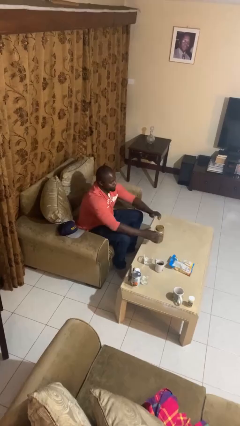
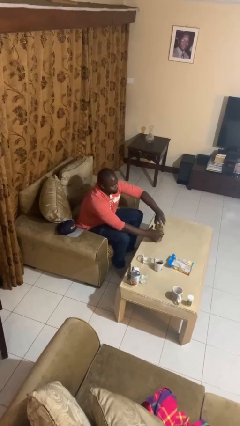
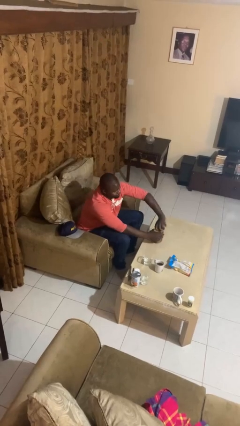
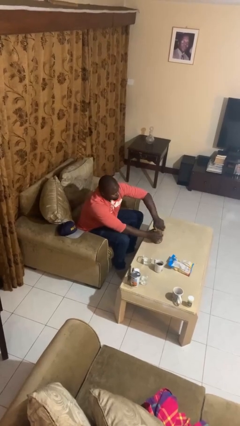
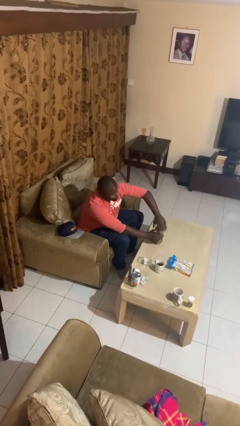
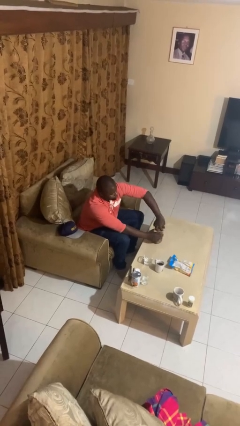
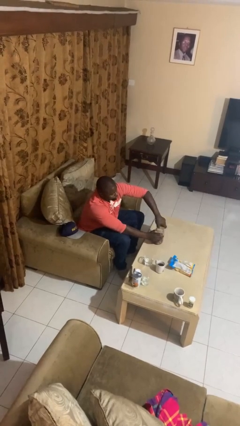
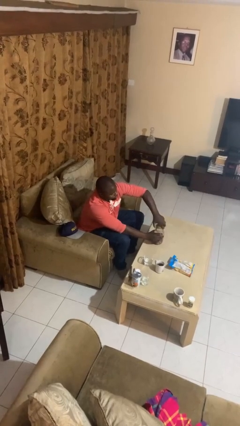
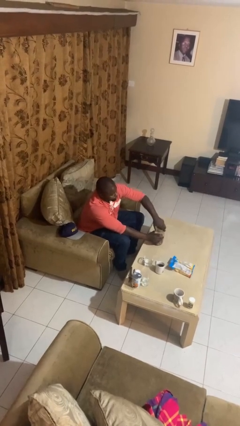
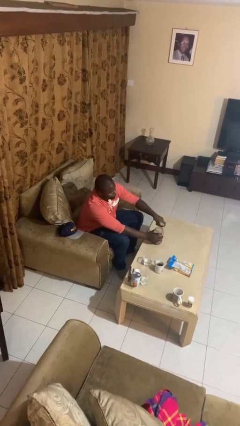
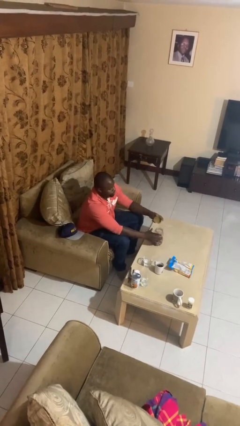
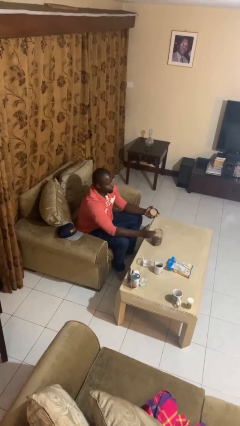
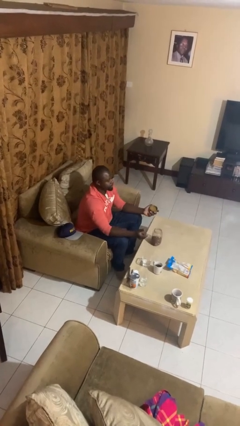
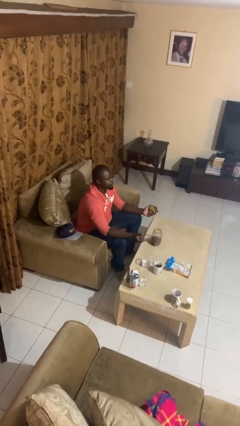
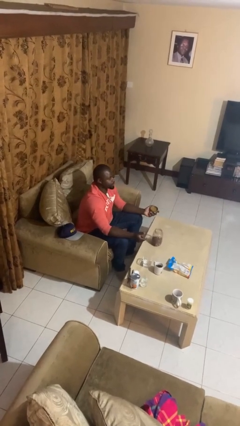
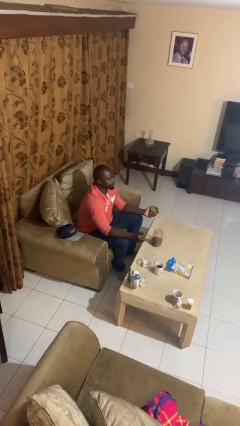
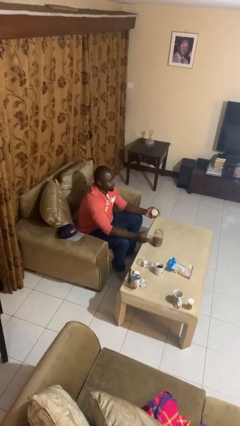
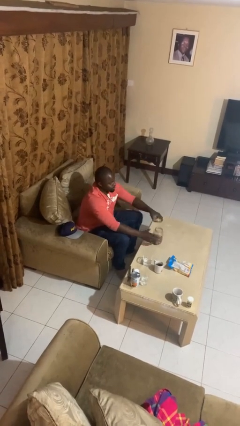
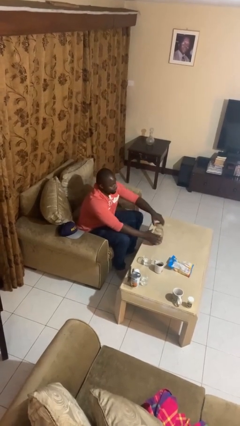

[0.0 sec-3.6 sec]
person opens jar

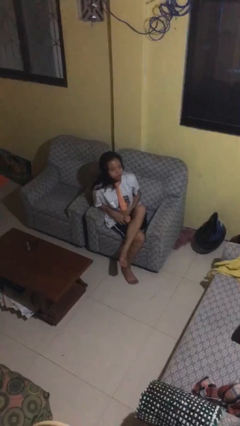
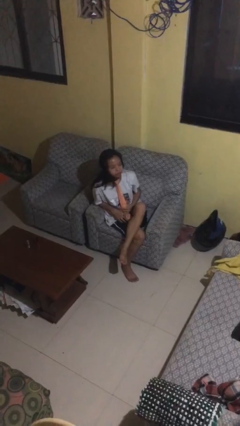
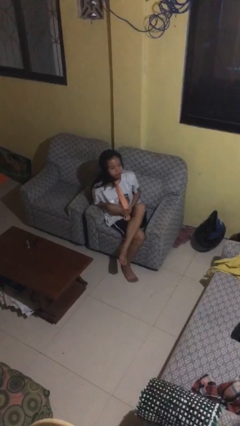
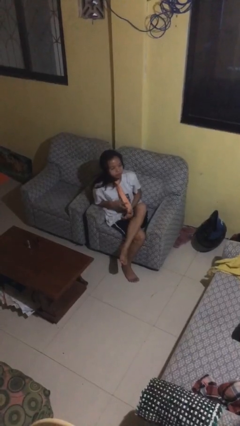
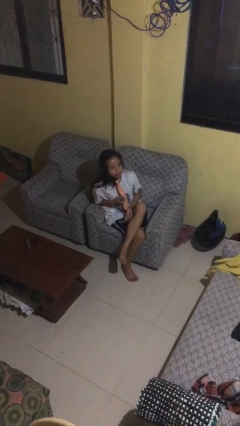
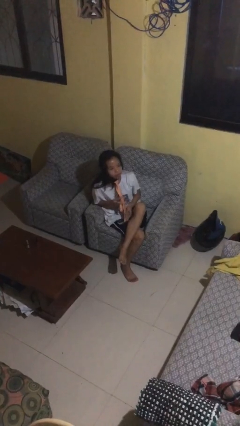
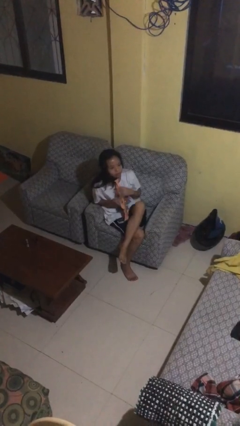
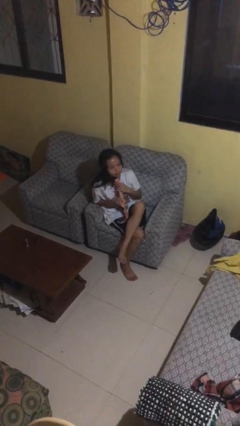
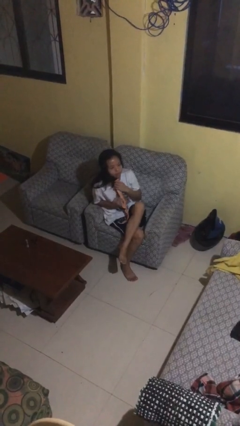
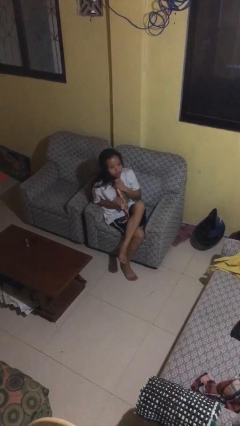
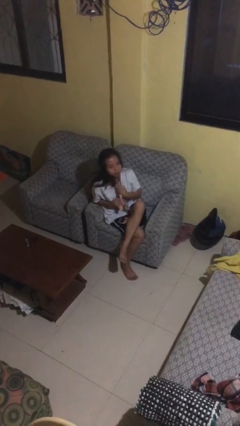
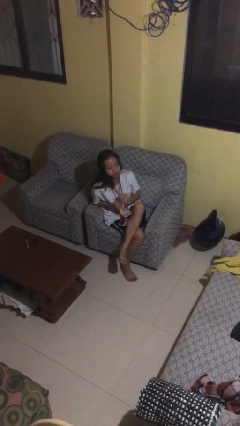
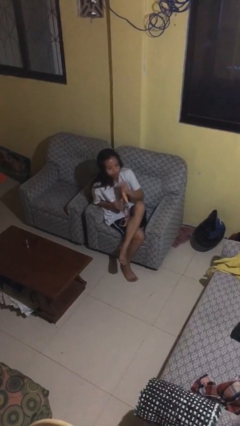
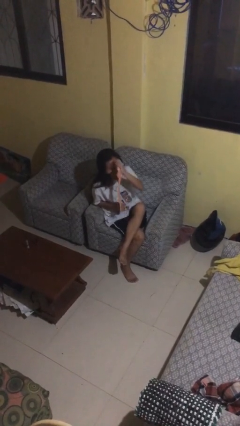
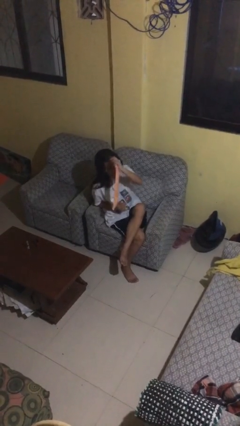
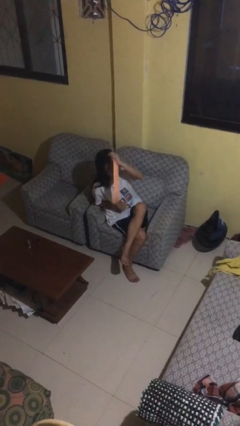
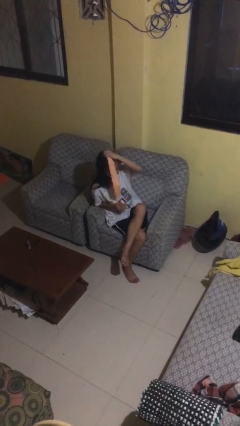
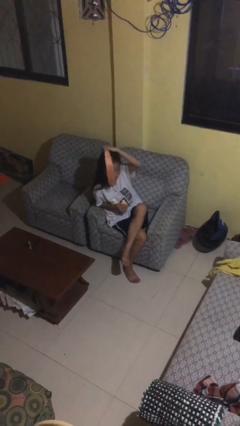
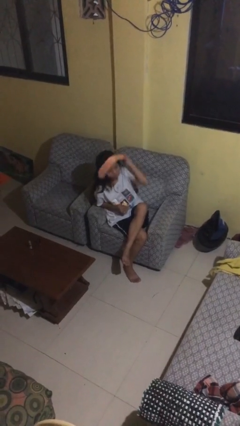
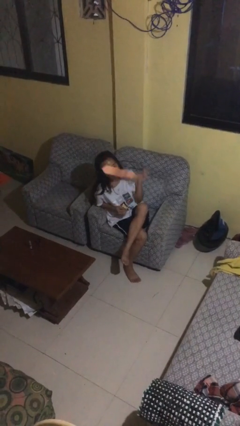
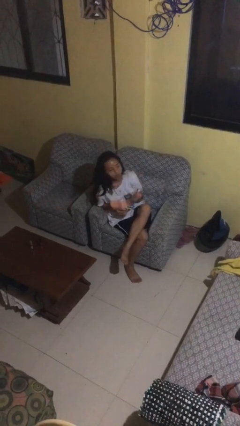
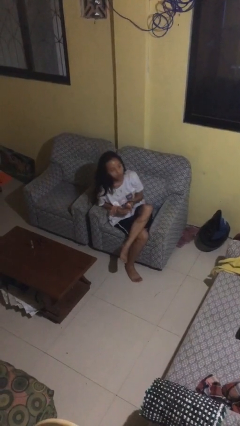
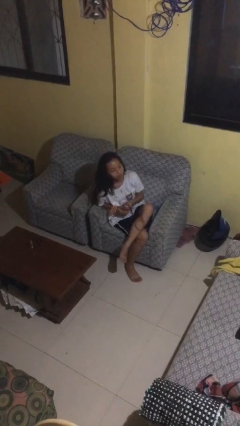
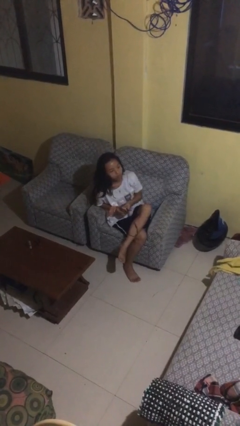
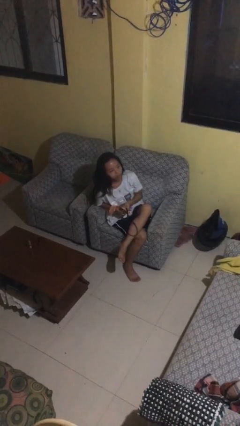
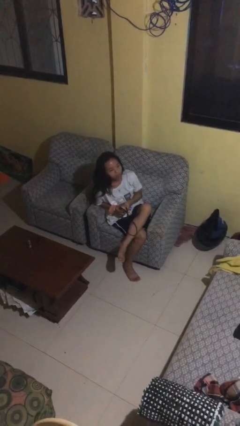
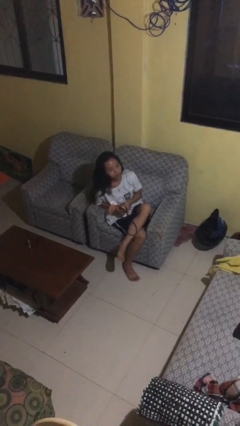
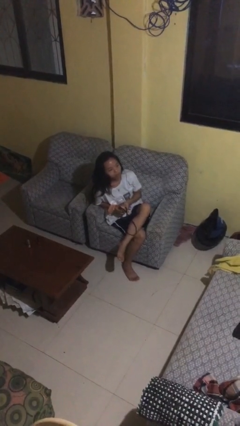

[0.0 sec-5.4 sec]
person takes off necktie

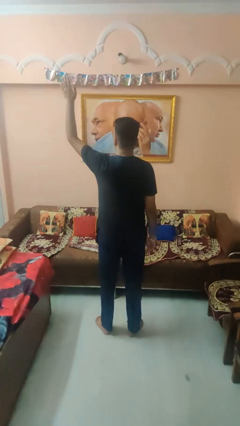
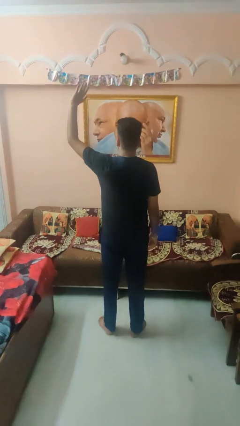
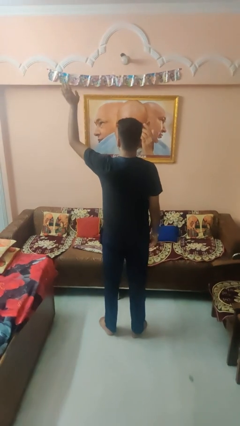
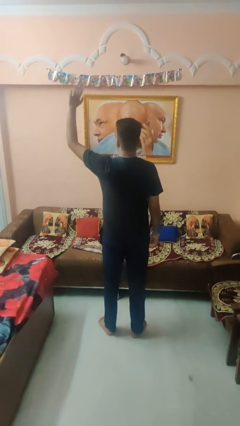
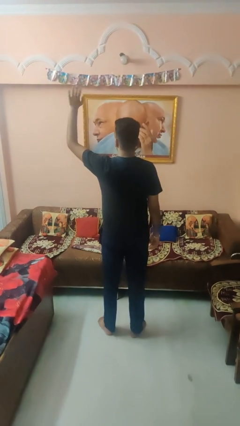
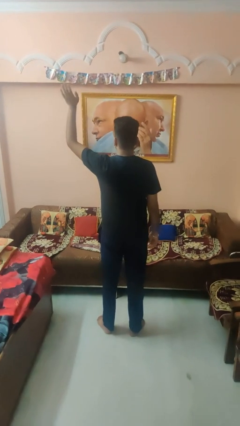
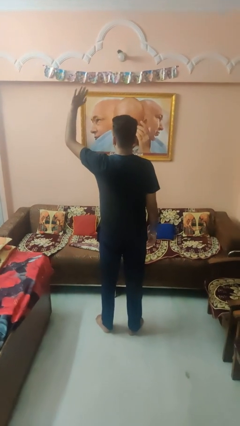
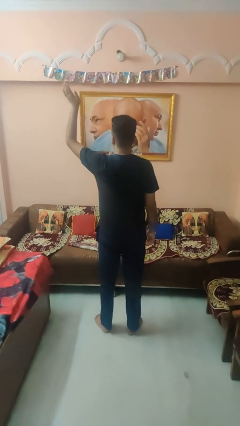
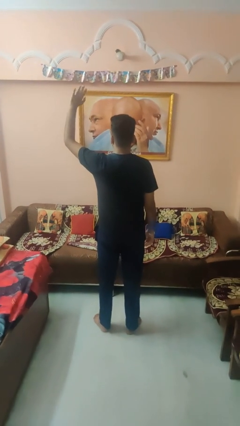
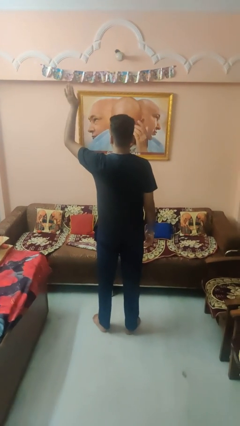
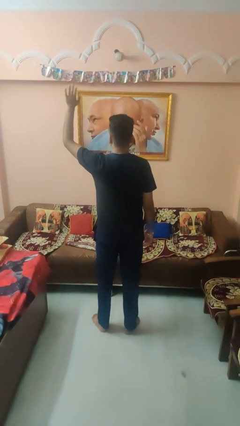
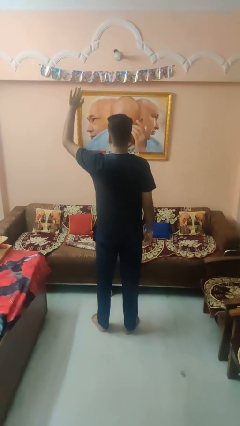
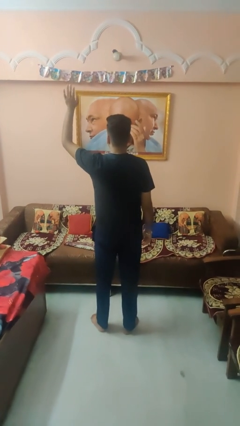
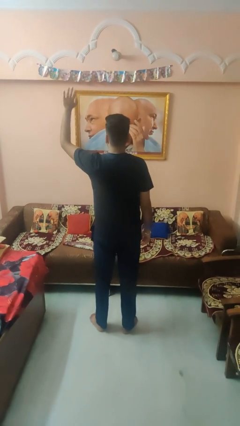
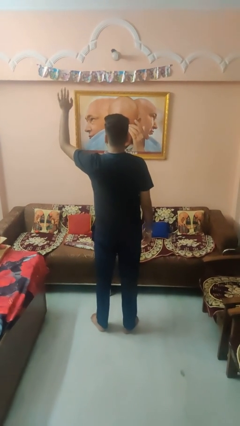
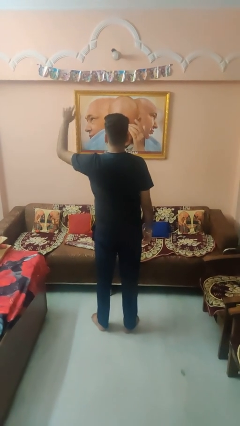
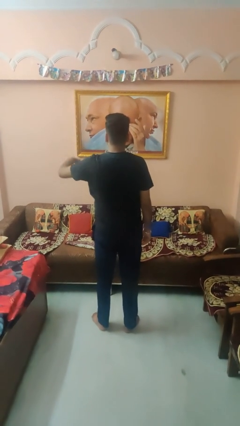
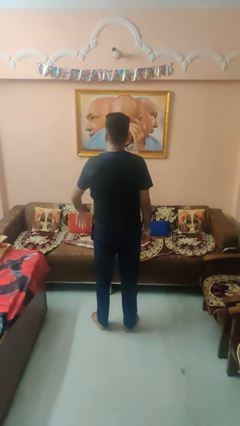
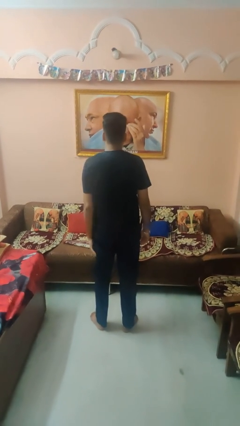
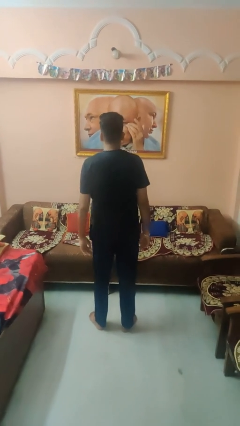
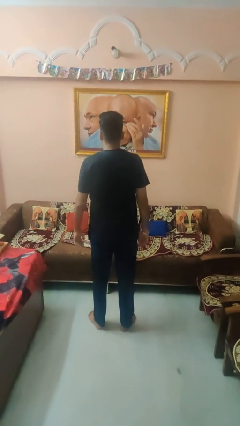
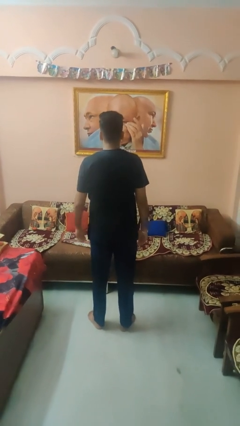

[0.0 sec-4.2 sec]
person waves at person

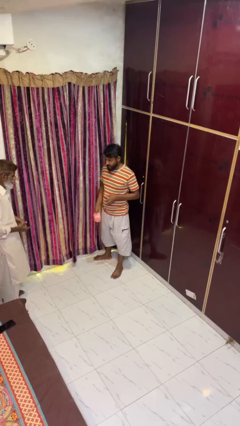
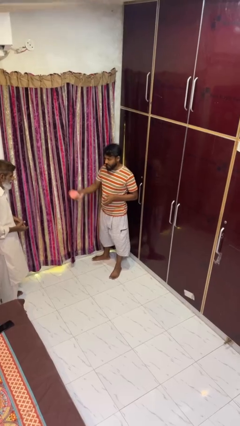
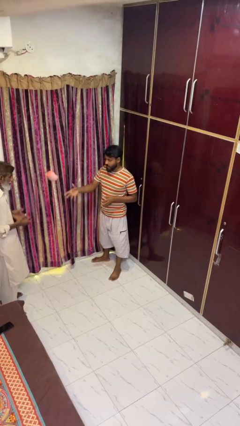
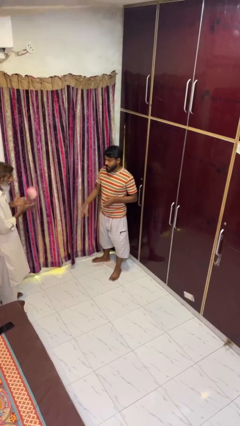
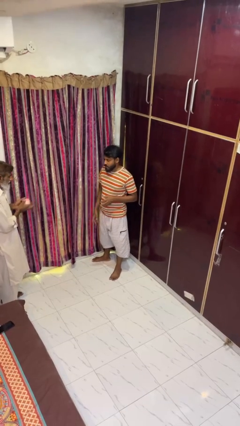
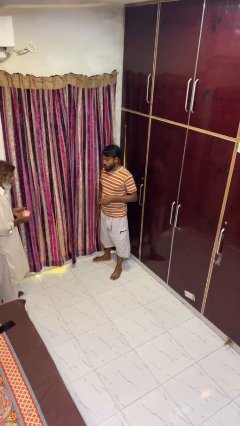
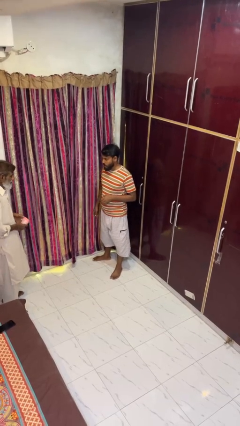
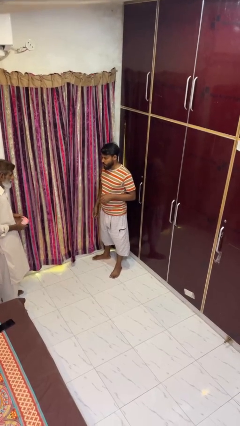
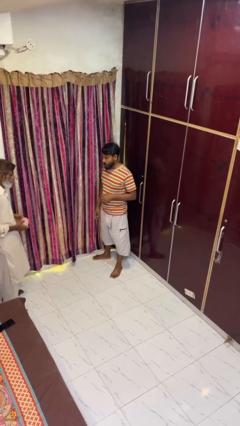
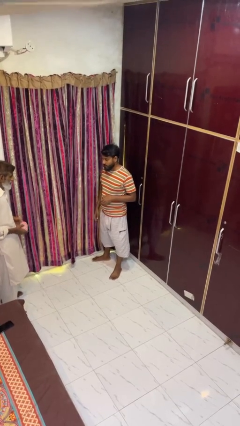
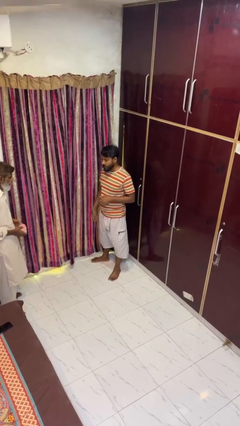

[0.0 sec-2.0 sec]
person throws object to person

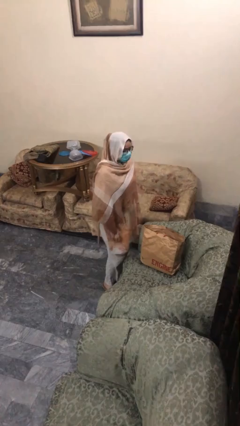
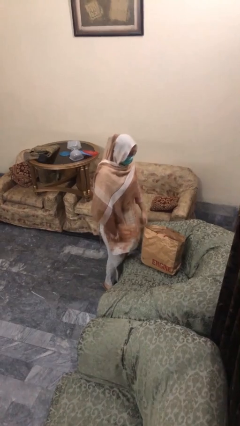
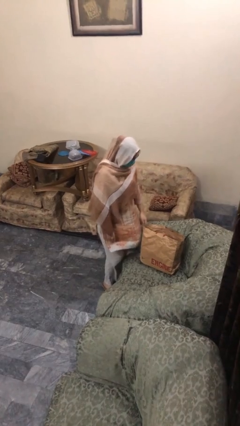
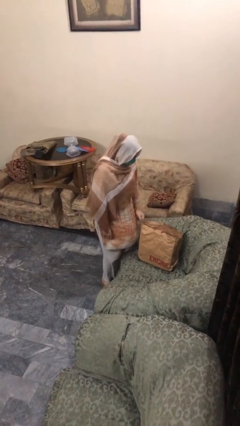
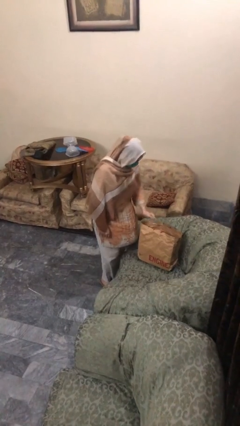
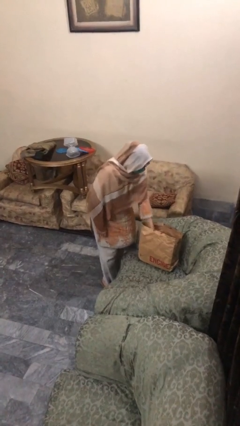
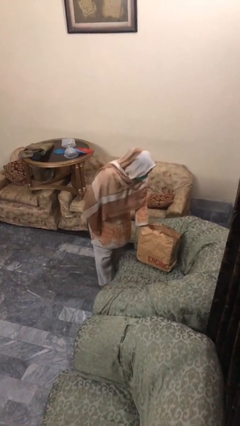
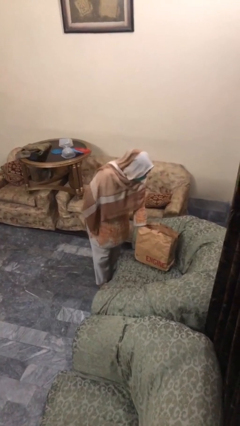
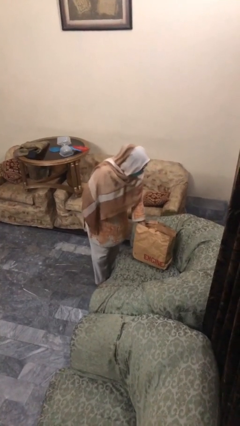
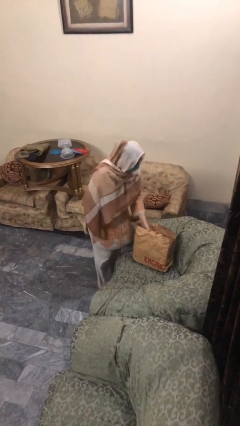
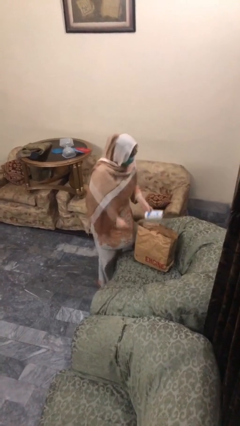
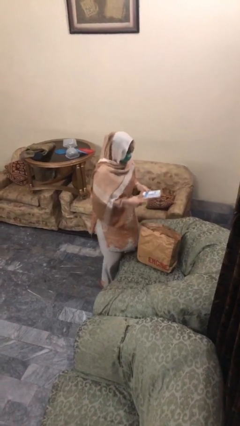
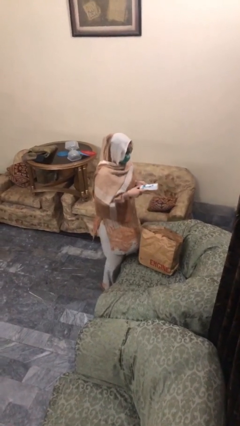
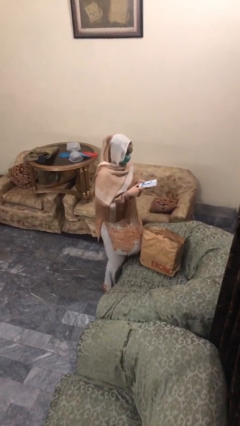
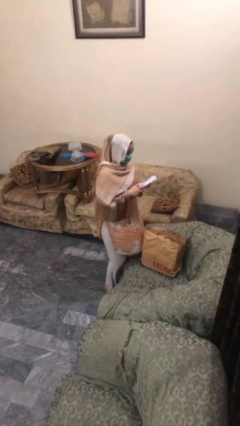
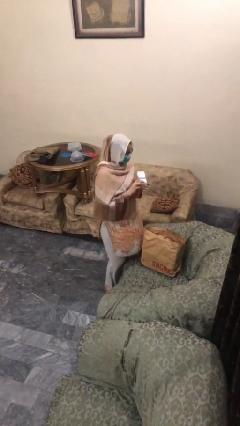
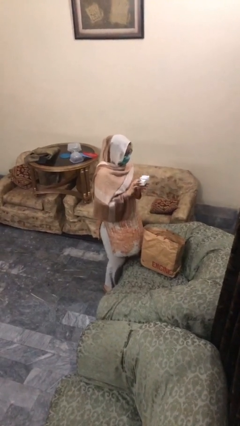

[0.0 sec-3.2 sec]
person takes object from bag
